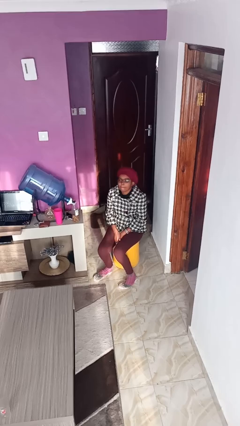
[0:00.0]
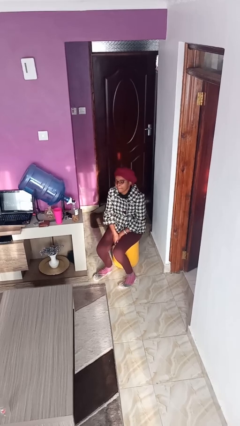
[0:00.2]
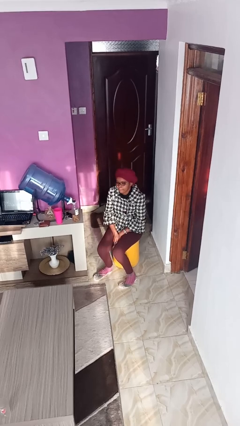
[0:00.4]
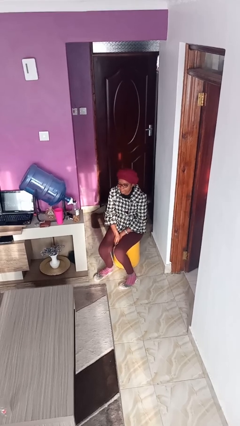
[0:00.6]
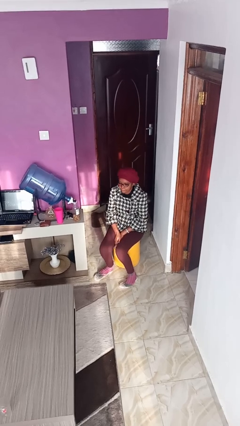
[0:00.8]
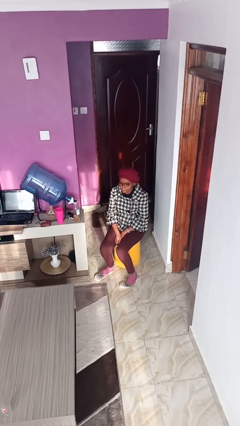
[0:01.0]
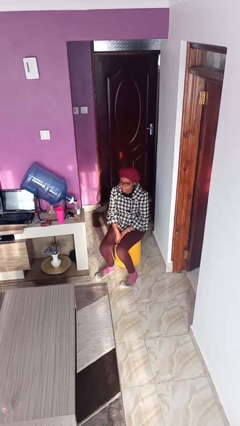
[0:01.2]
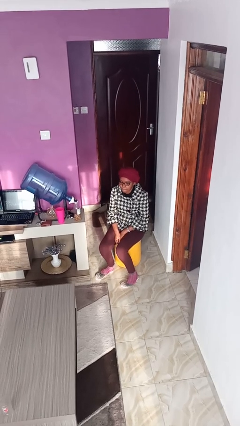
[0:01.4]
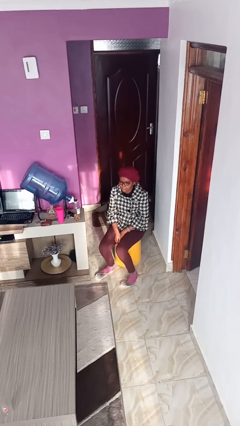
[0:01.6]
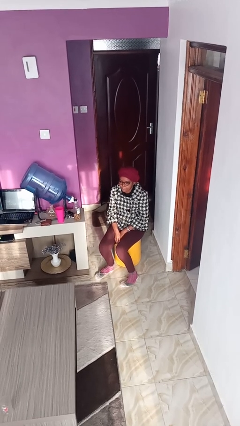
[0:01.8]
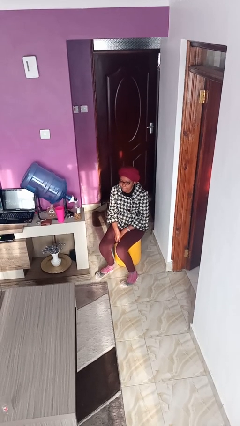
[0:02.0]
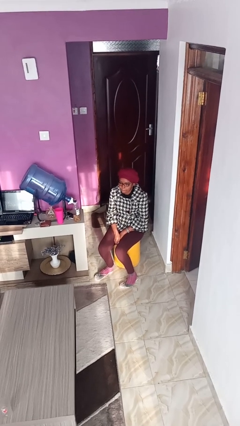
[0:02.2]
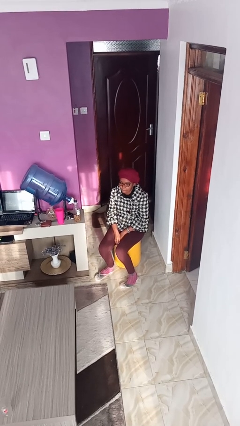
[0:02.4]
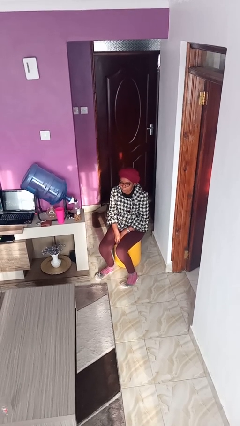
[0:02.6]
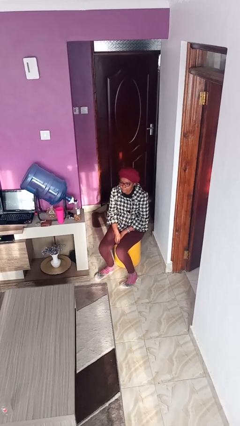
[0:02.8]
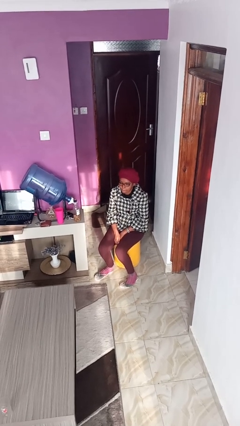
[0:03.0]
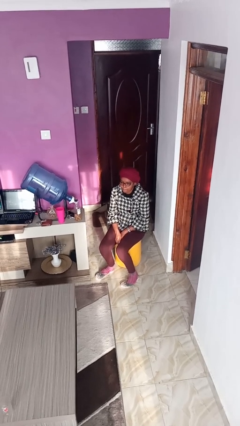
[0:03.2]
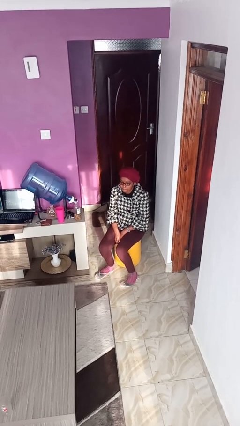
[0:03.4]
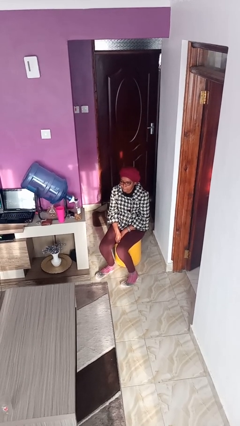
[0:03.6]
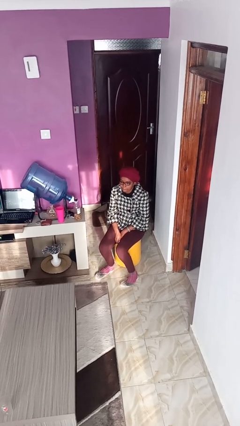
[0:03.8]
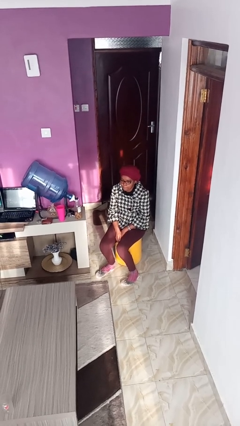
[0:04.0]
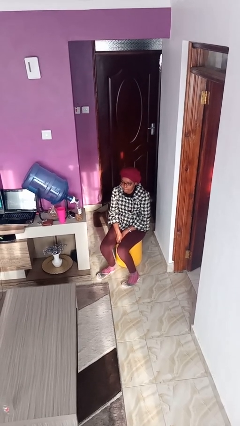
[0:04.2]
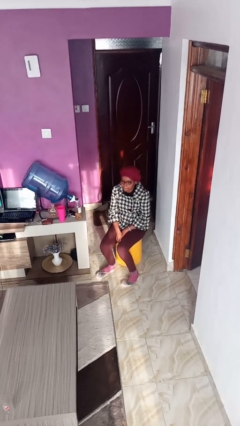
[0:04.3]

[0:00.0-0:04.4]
person gestures lower hand

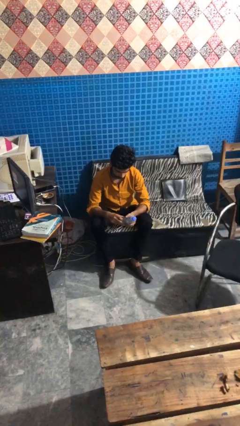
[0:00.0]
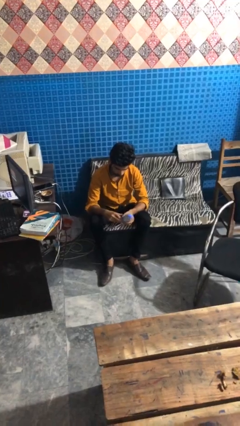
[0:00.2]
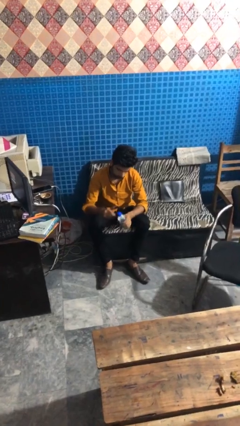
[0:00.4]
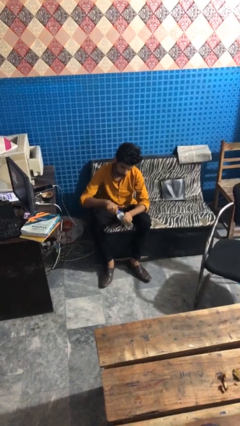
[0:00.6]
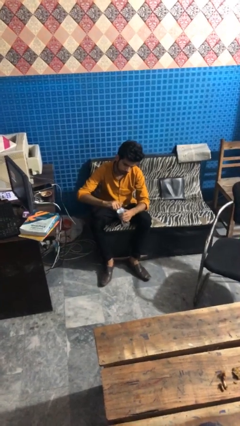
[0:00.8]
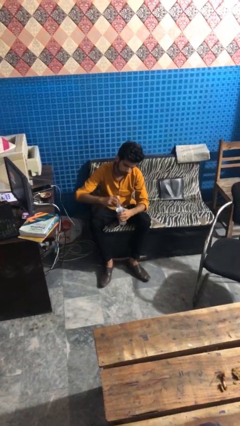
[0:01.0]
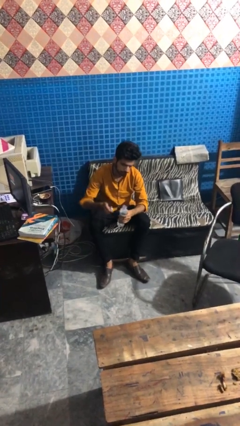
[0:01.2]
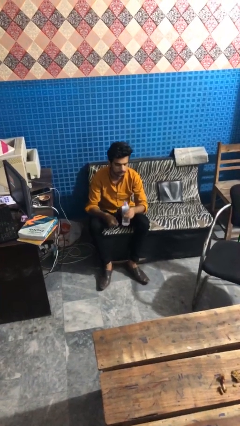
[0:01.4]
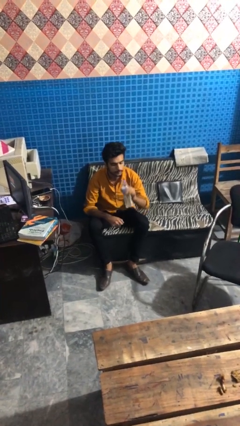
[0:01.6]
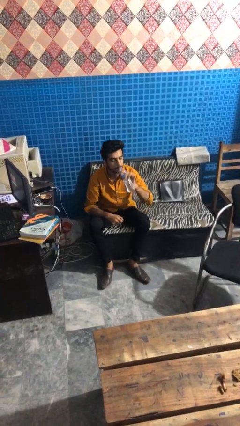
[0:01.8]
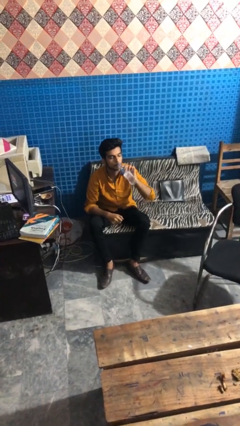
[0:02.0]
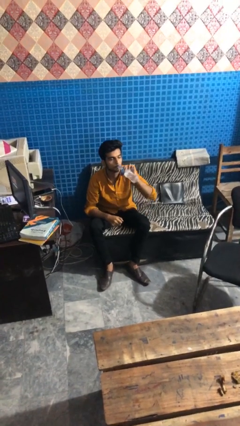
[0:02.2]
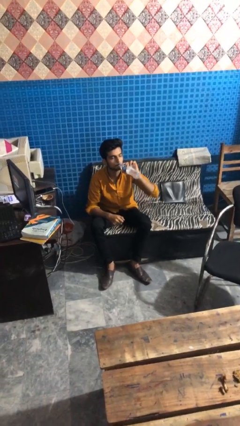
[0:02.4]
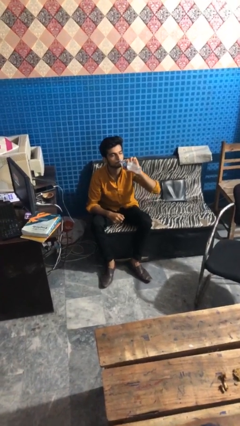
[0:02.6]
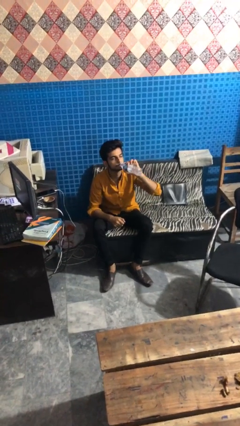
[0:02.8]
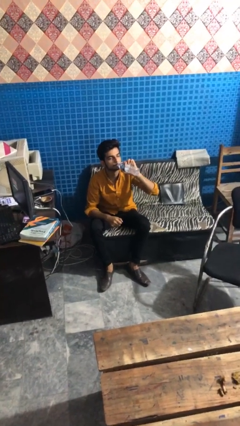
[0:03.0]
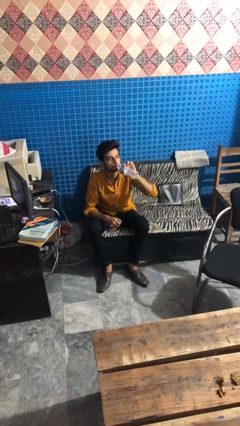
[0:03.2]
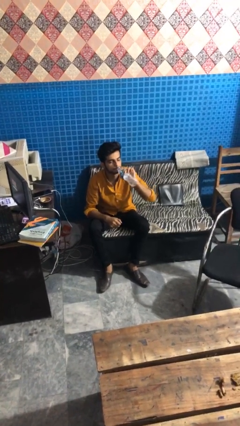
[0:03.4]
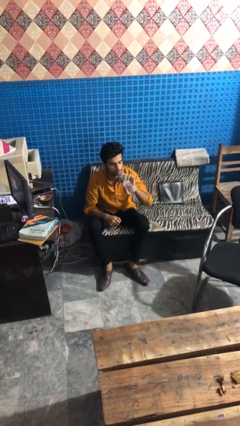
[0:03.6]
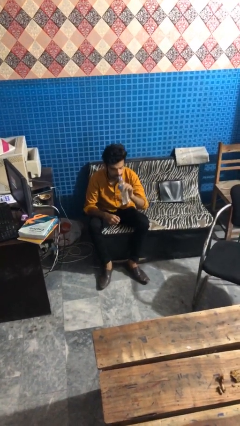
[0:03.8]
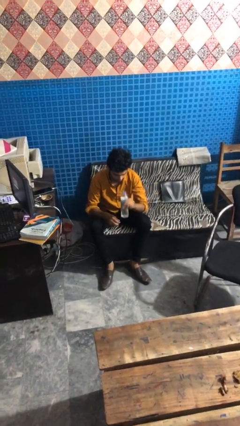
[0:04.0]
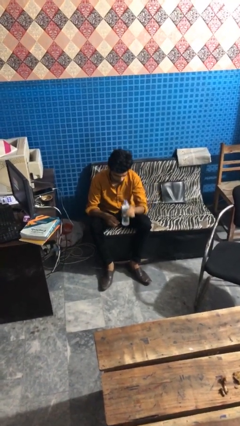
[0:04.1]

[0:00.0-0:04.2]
person drinks from bottle

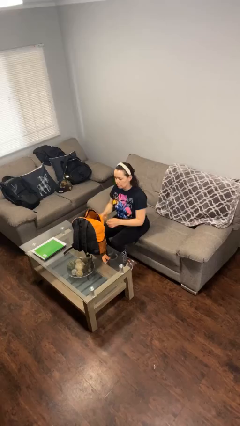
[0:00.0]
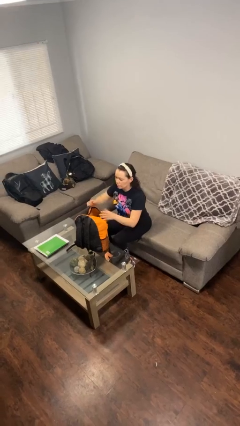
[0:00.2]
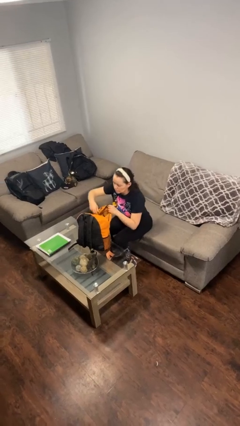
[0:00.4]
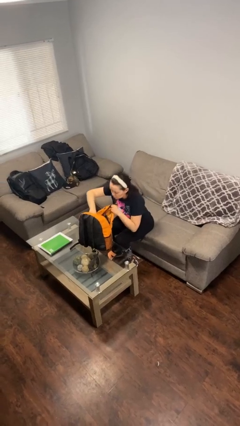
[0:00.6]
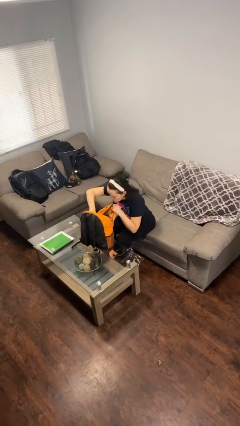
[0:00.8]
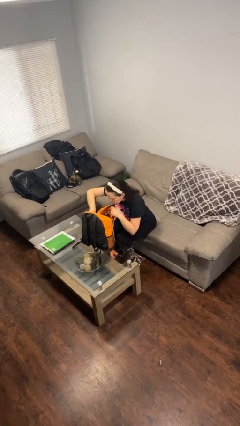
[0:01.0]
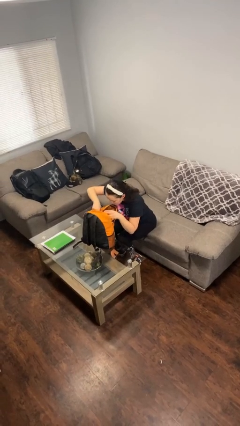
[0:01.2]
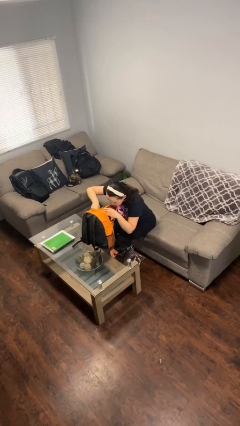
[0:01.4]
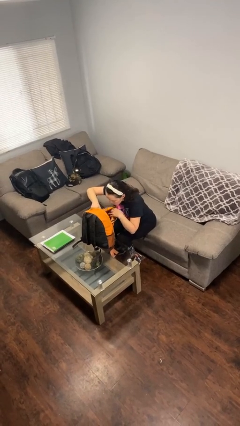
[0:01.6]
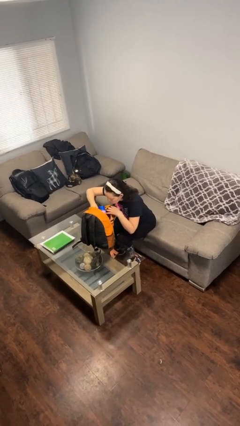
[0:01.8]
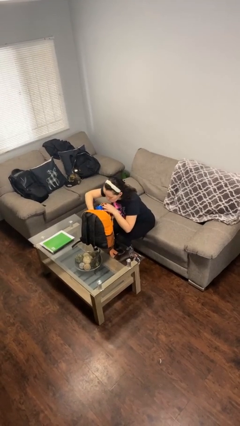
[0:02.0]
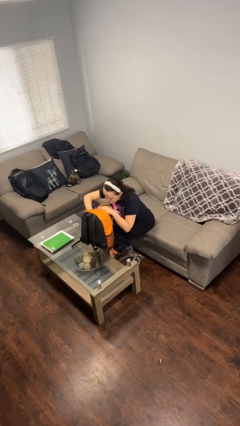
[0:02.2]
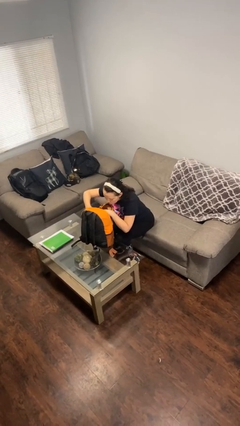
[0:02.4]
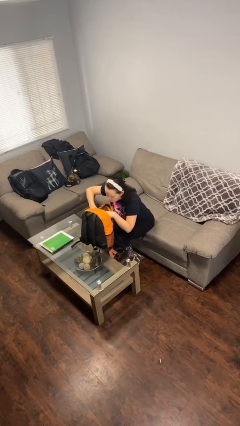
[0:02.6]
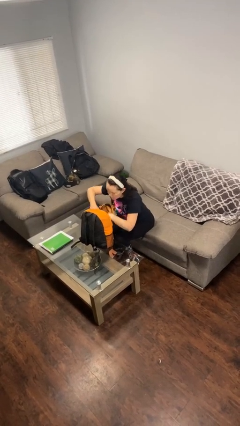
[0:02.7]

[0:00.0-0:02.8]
person searches in backpack

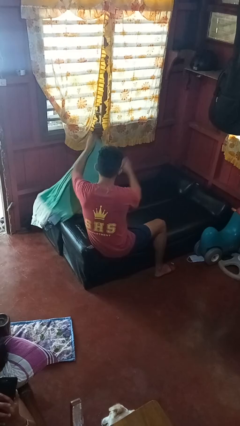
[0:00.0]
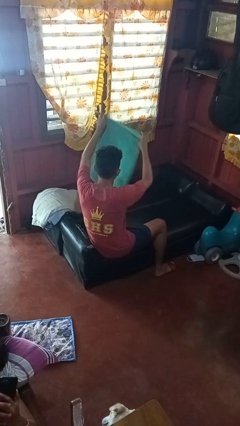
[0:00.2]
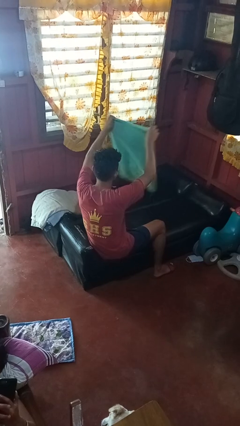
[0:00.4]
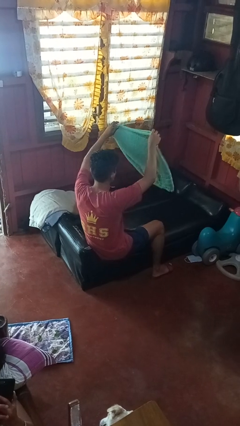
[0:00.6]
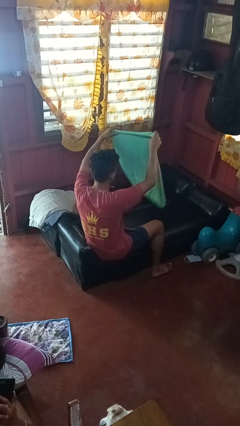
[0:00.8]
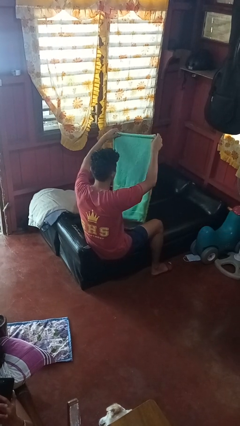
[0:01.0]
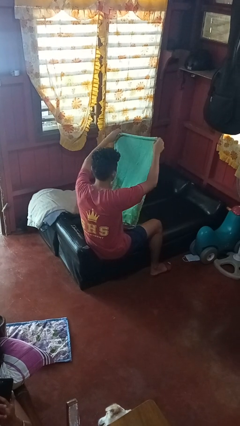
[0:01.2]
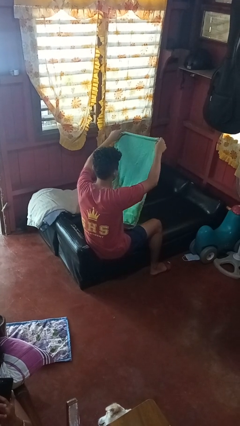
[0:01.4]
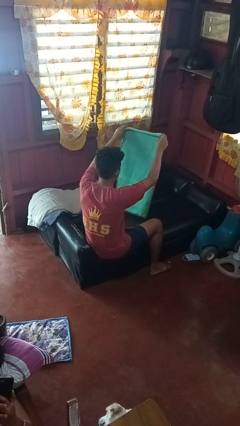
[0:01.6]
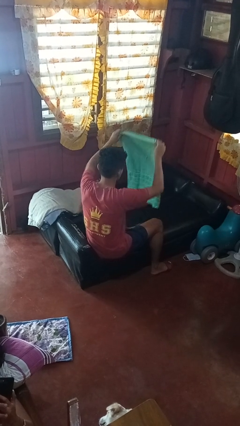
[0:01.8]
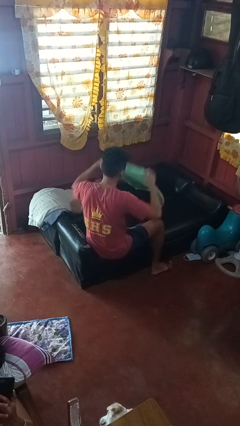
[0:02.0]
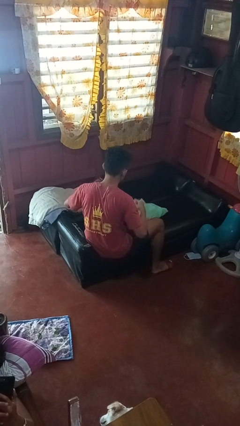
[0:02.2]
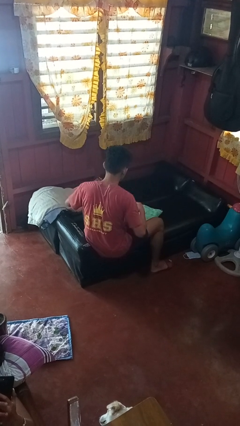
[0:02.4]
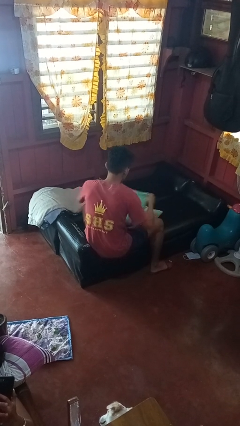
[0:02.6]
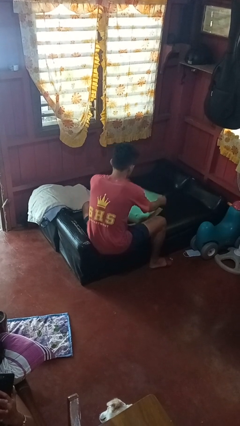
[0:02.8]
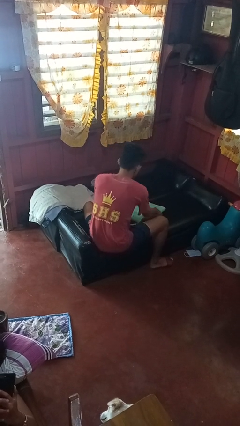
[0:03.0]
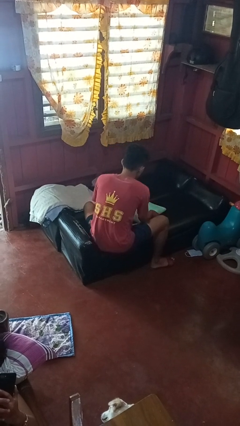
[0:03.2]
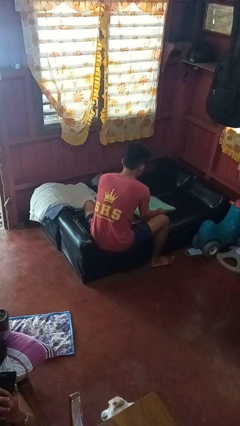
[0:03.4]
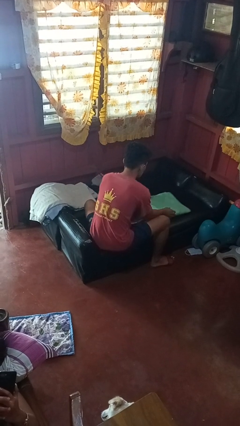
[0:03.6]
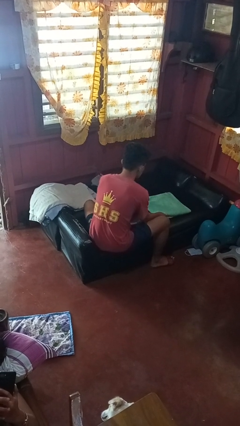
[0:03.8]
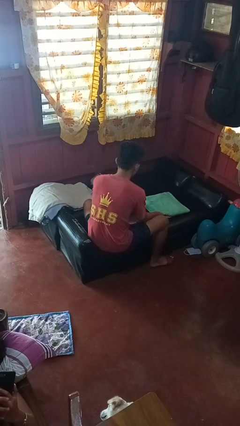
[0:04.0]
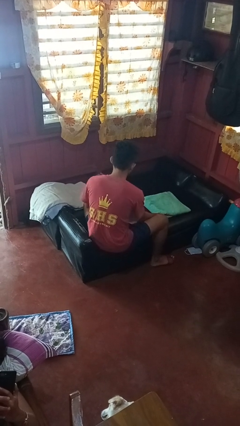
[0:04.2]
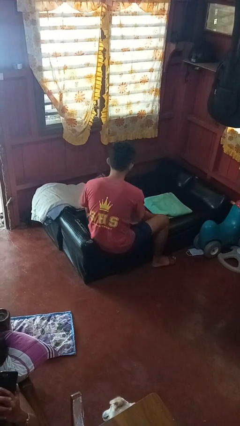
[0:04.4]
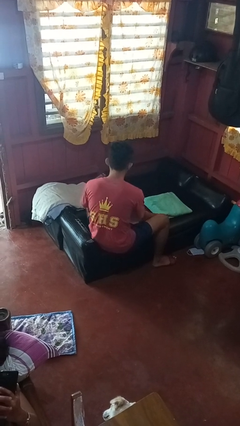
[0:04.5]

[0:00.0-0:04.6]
person folds towel

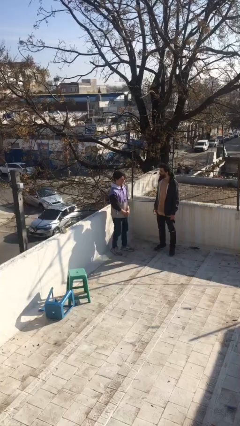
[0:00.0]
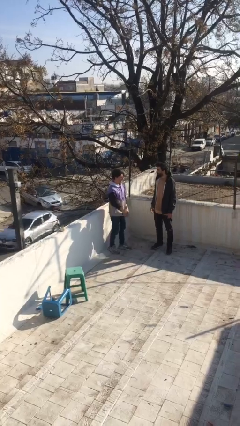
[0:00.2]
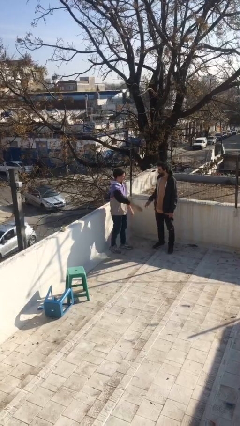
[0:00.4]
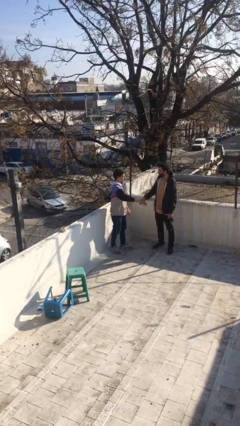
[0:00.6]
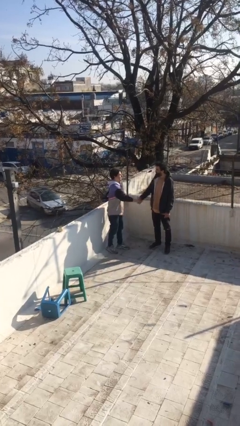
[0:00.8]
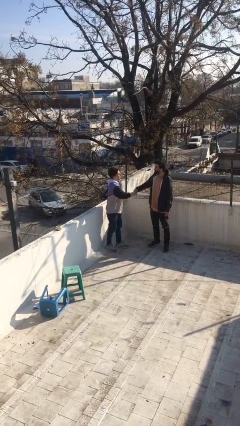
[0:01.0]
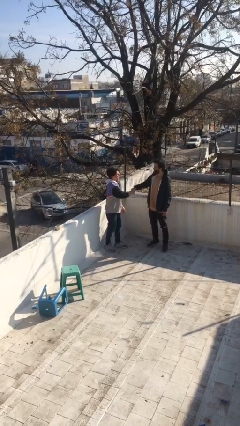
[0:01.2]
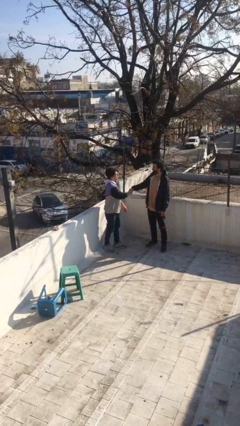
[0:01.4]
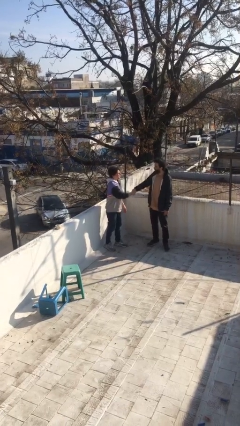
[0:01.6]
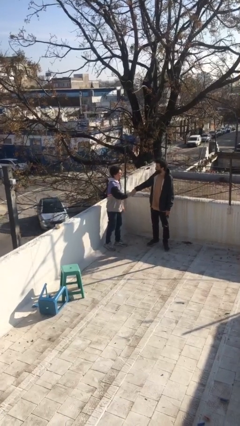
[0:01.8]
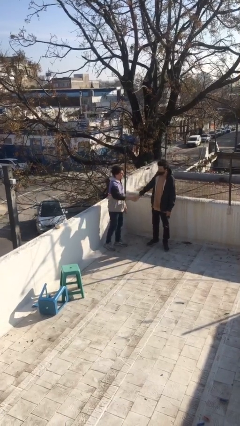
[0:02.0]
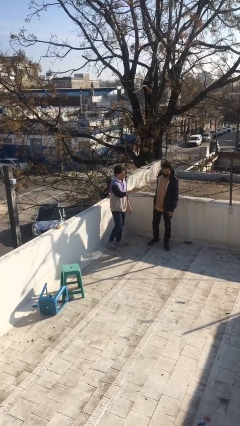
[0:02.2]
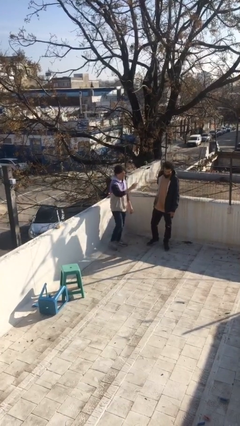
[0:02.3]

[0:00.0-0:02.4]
person shakes hand
